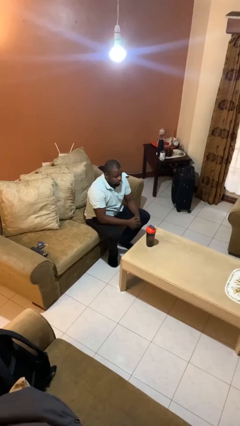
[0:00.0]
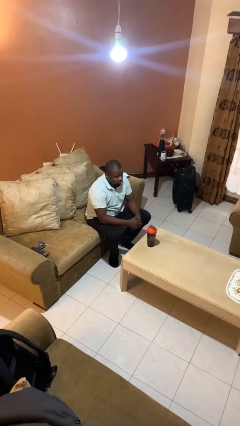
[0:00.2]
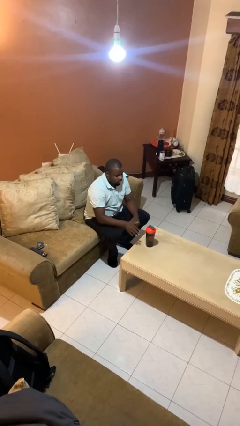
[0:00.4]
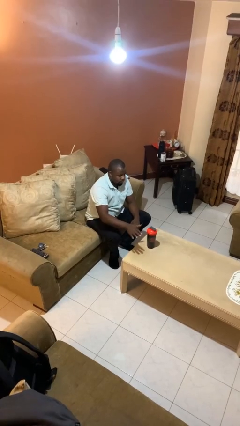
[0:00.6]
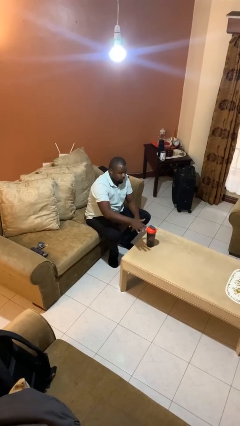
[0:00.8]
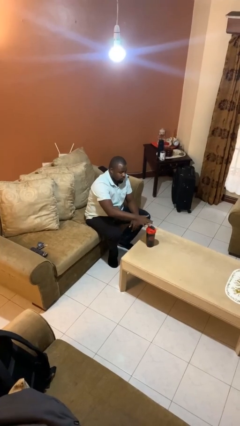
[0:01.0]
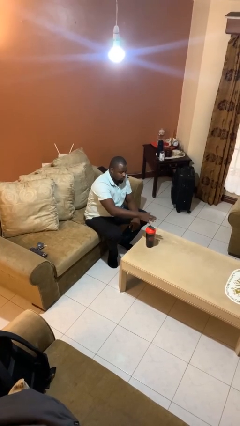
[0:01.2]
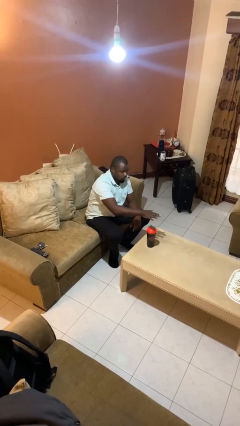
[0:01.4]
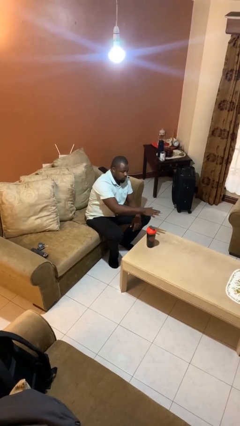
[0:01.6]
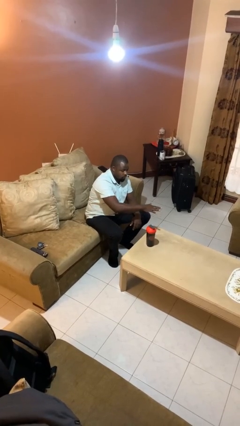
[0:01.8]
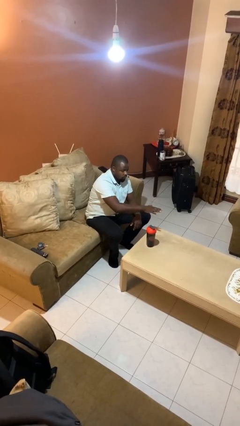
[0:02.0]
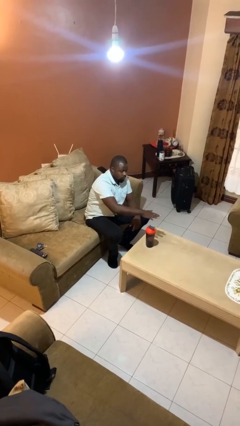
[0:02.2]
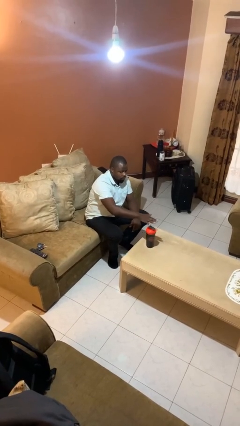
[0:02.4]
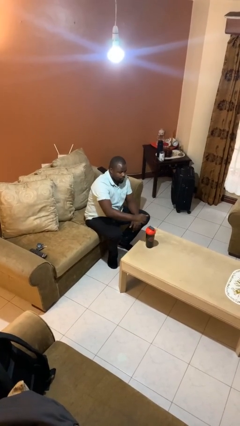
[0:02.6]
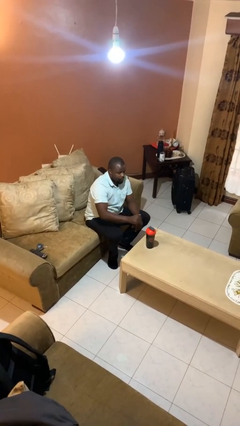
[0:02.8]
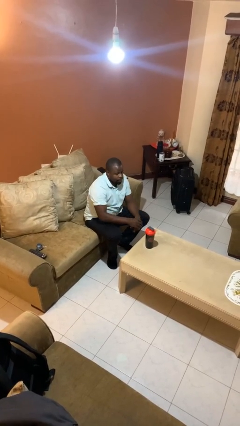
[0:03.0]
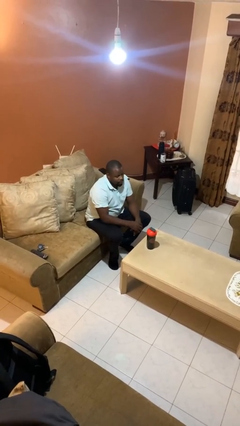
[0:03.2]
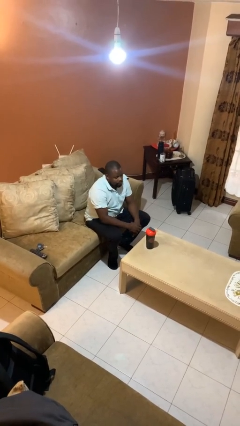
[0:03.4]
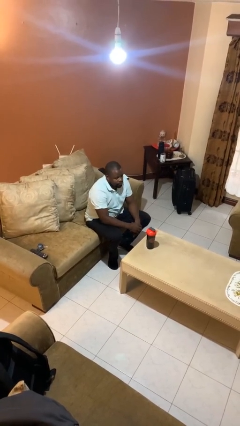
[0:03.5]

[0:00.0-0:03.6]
person waves hand over object

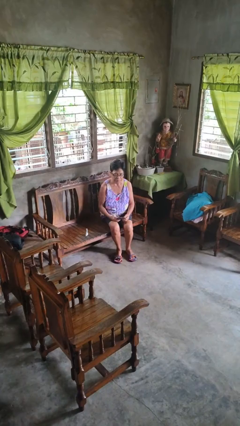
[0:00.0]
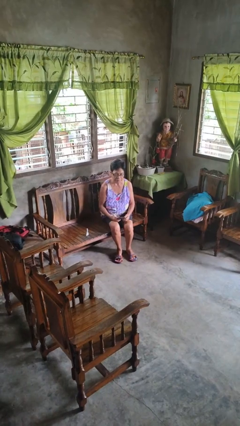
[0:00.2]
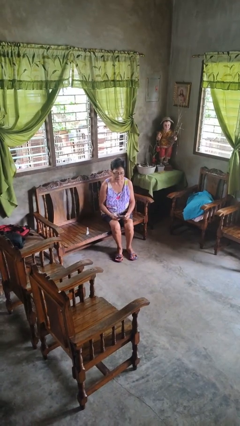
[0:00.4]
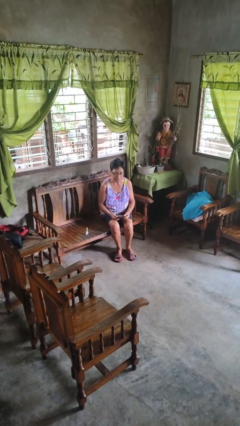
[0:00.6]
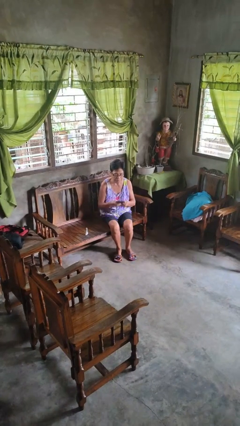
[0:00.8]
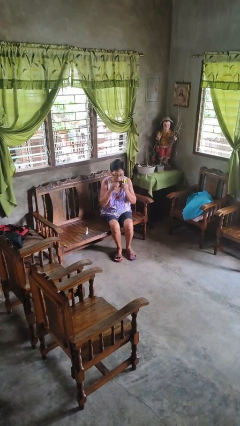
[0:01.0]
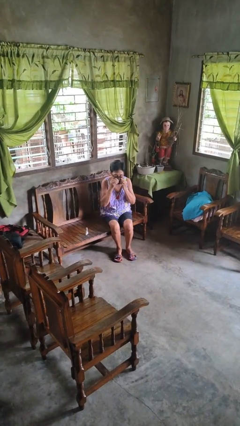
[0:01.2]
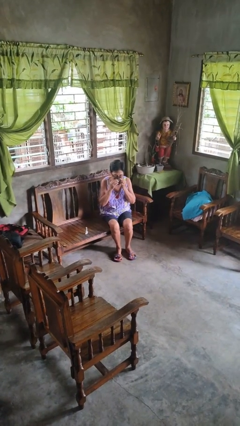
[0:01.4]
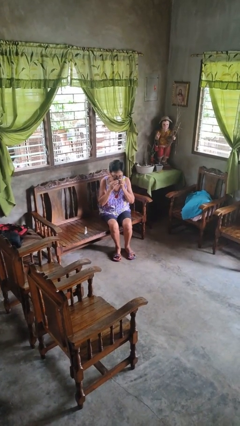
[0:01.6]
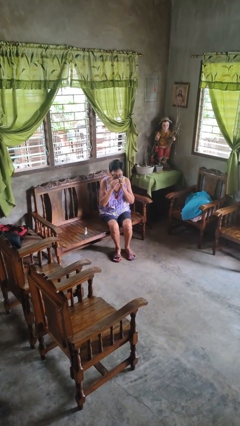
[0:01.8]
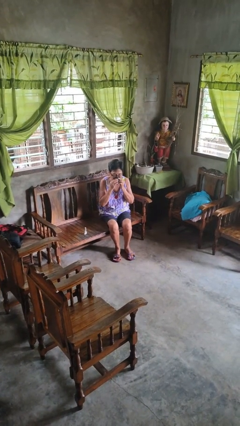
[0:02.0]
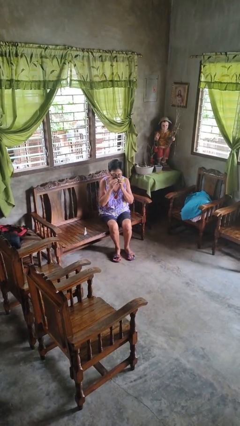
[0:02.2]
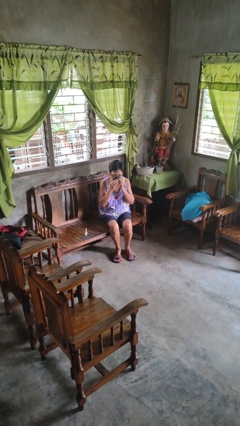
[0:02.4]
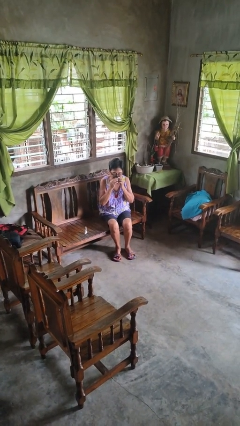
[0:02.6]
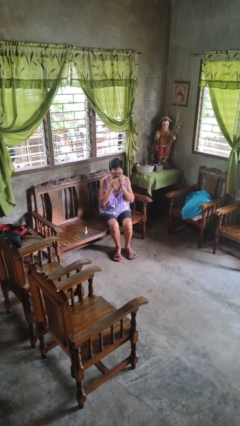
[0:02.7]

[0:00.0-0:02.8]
person blows nose

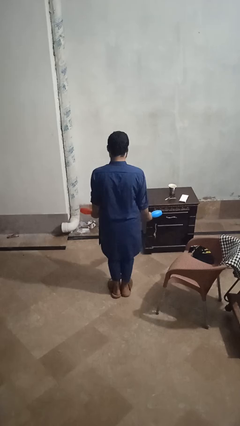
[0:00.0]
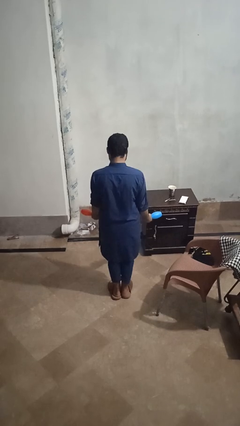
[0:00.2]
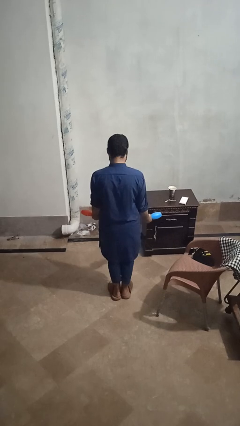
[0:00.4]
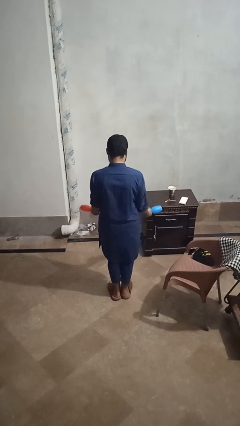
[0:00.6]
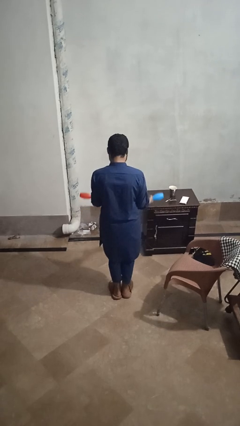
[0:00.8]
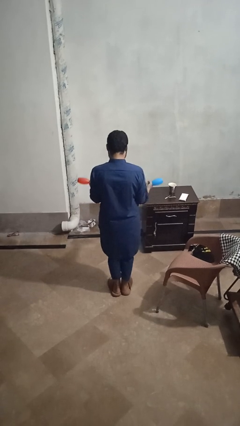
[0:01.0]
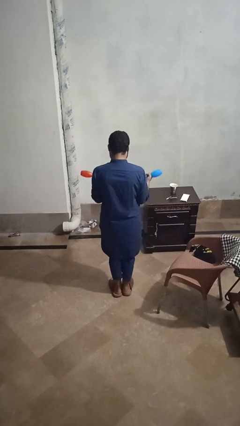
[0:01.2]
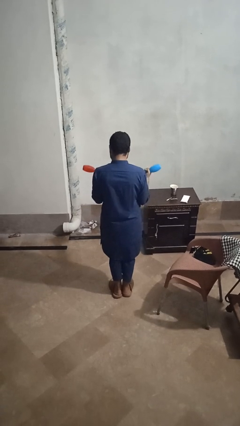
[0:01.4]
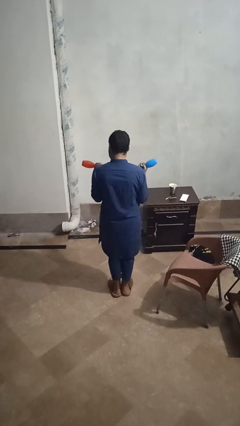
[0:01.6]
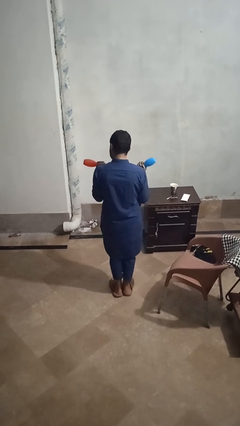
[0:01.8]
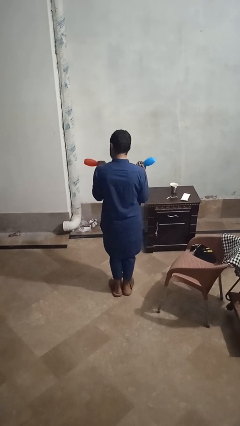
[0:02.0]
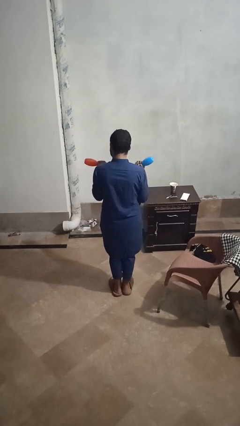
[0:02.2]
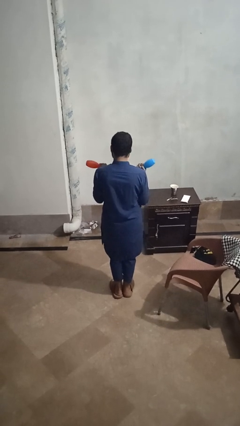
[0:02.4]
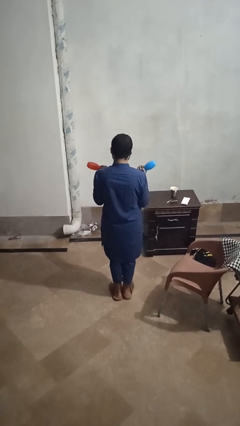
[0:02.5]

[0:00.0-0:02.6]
person lifts dumbbells

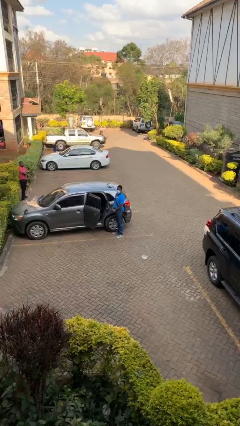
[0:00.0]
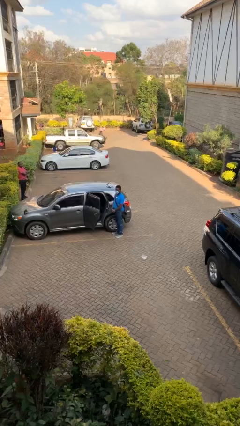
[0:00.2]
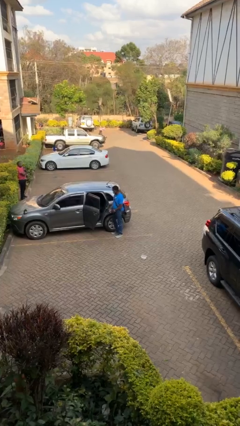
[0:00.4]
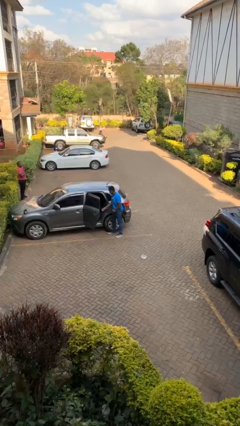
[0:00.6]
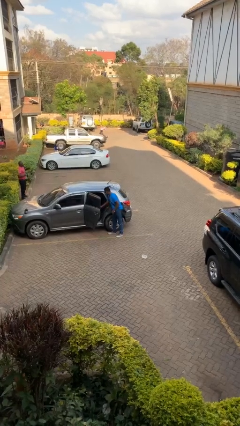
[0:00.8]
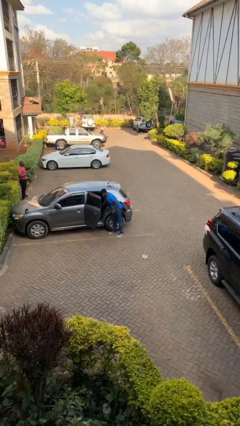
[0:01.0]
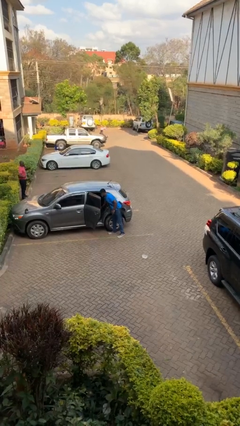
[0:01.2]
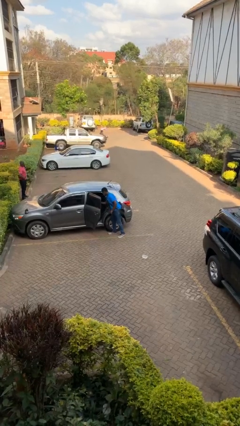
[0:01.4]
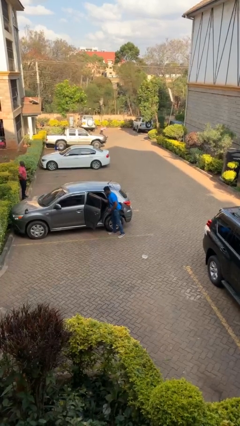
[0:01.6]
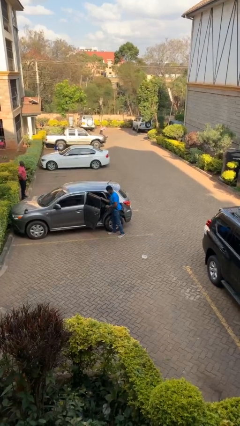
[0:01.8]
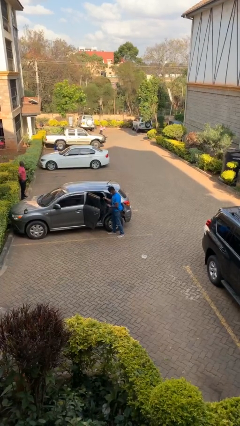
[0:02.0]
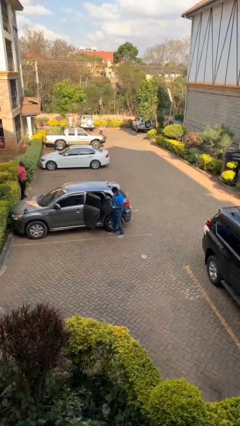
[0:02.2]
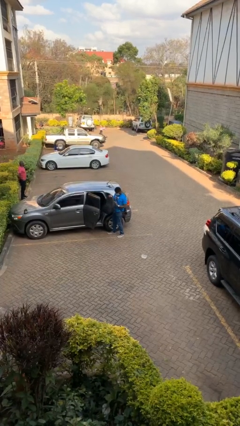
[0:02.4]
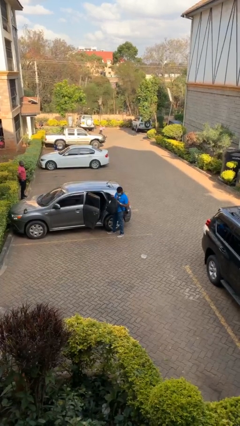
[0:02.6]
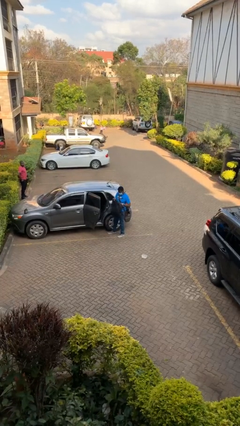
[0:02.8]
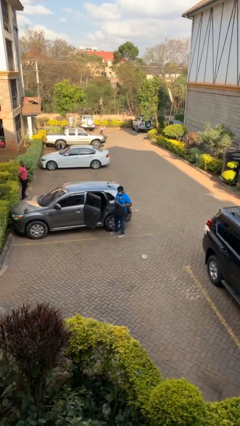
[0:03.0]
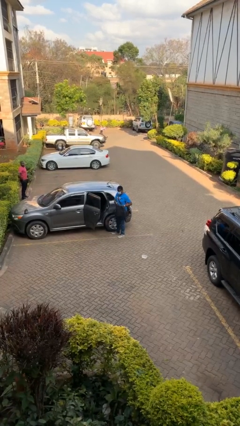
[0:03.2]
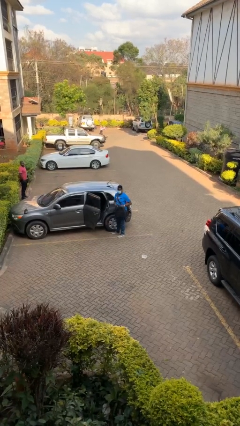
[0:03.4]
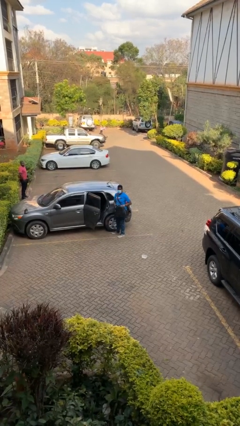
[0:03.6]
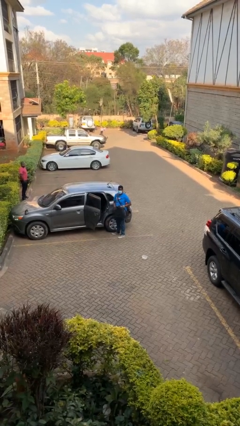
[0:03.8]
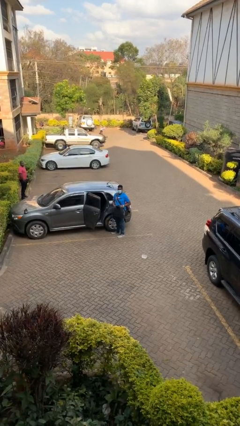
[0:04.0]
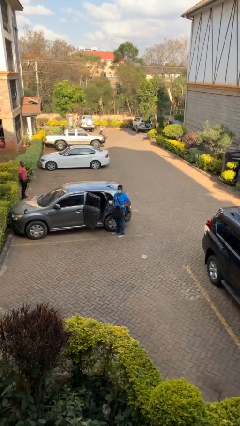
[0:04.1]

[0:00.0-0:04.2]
person unloads car

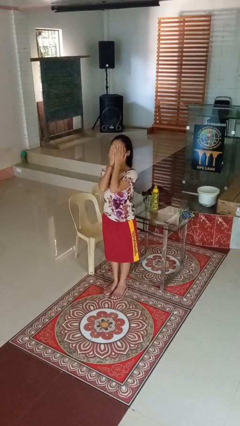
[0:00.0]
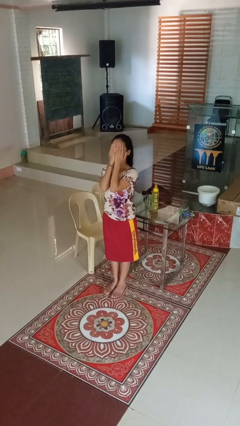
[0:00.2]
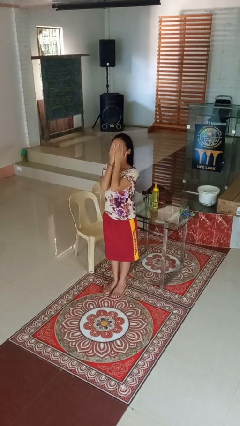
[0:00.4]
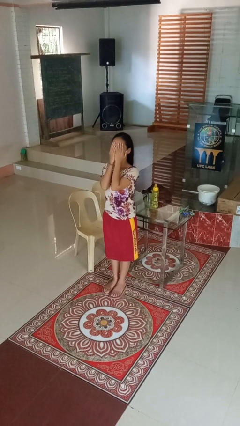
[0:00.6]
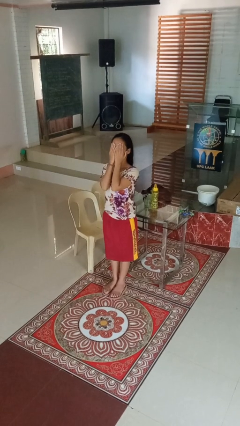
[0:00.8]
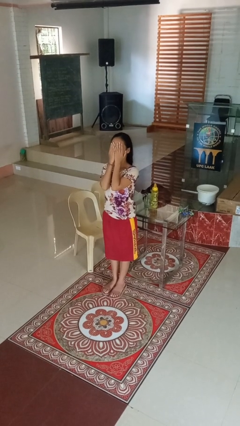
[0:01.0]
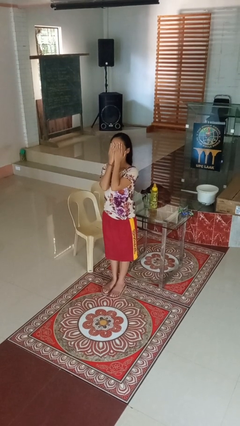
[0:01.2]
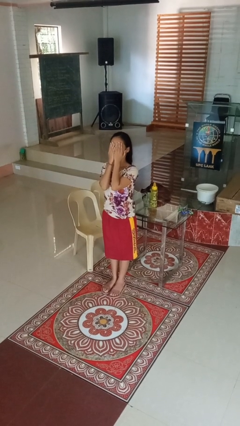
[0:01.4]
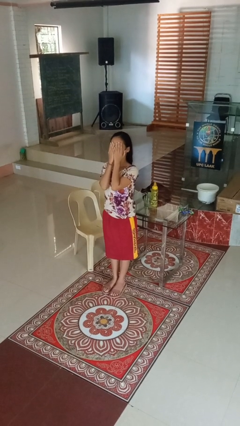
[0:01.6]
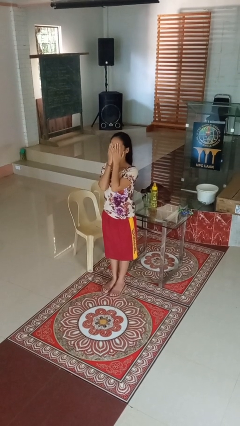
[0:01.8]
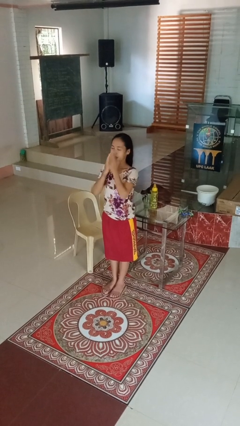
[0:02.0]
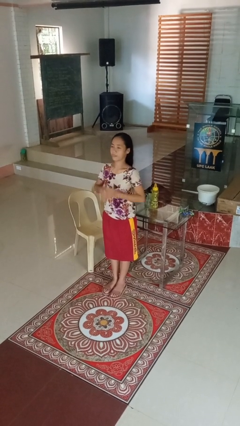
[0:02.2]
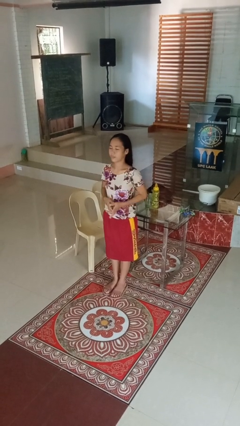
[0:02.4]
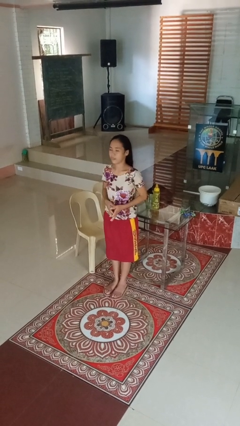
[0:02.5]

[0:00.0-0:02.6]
person covers face with hands

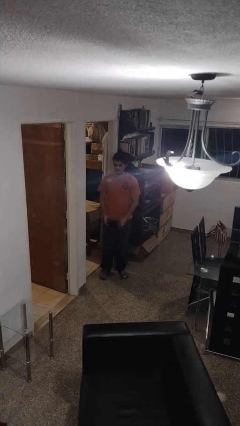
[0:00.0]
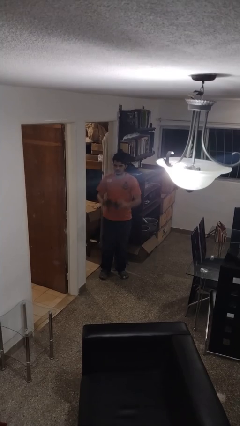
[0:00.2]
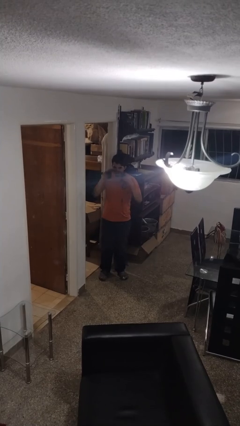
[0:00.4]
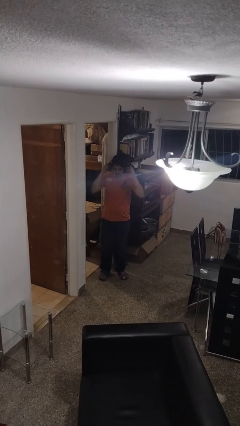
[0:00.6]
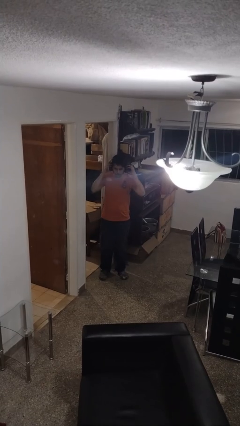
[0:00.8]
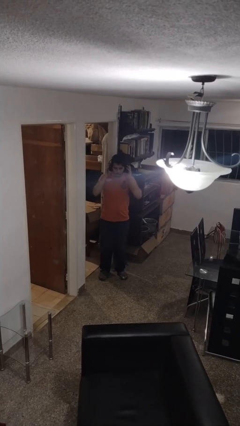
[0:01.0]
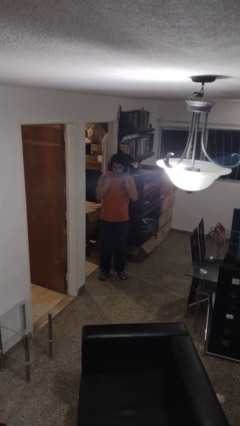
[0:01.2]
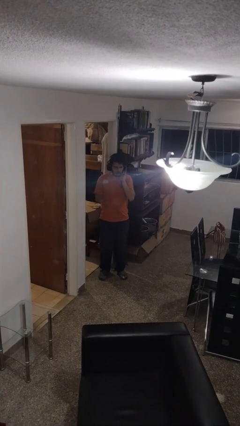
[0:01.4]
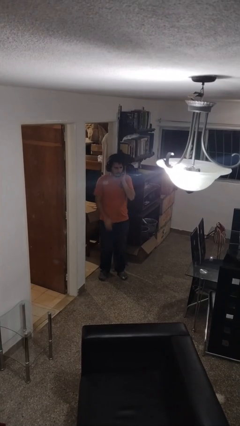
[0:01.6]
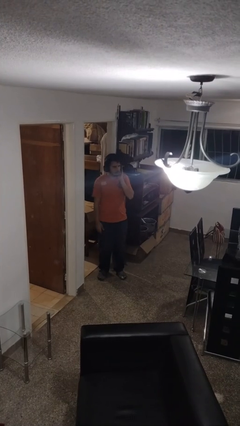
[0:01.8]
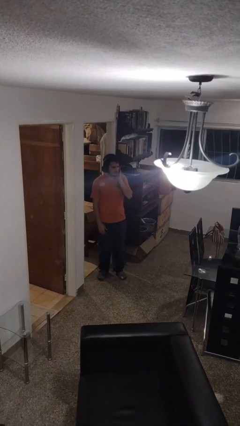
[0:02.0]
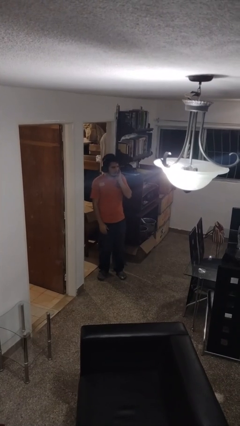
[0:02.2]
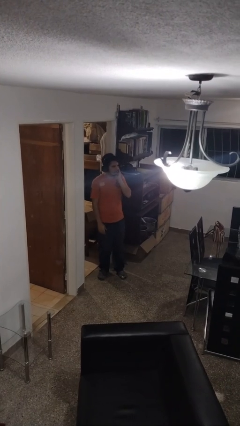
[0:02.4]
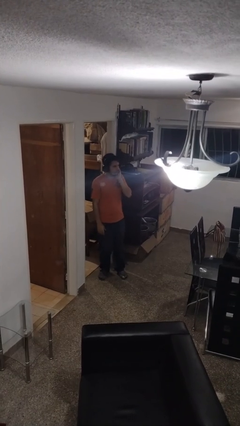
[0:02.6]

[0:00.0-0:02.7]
person puts on headphones
